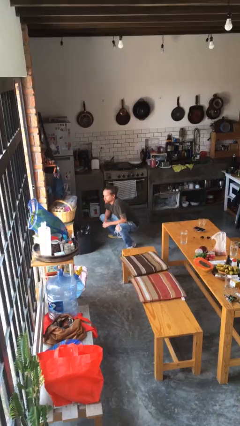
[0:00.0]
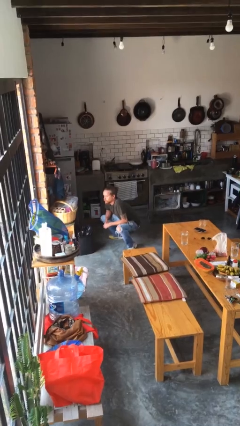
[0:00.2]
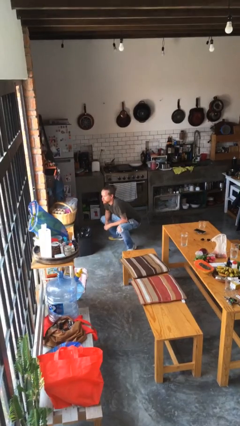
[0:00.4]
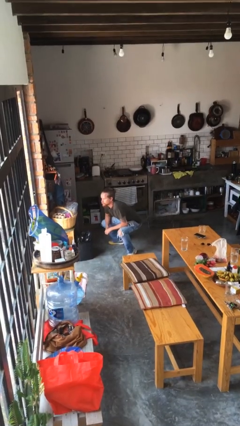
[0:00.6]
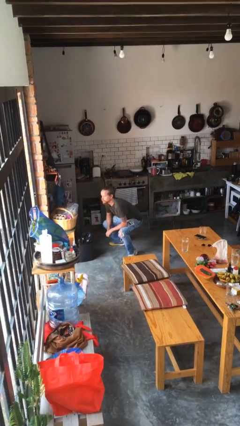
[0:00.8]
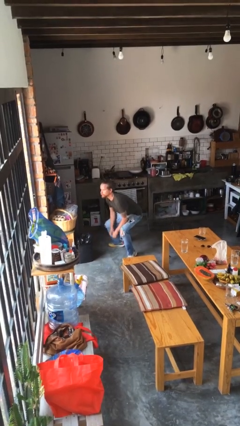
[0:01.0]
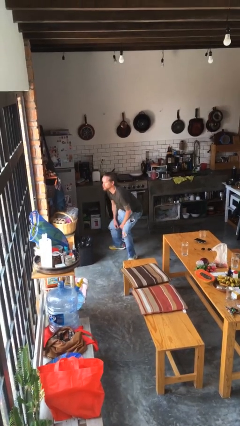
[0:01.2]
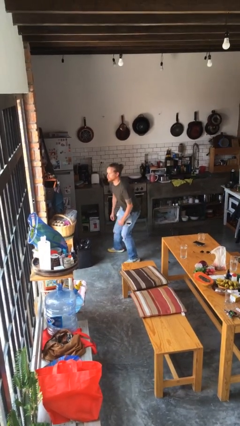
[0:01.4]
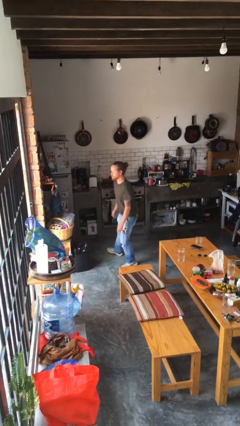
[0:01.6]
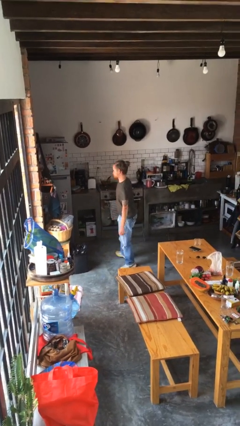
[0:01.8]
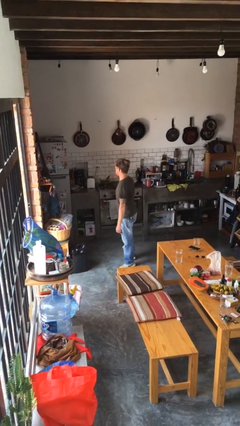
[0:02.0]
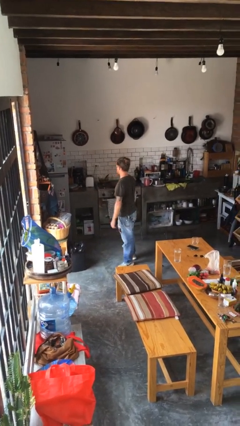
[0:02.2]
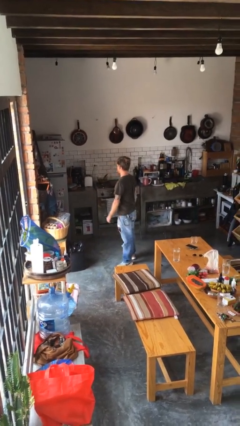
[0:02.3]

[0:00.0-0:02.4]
person stands up

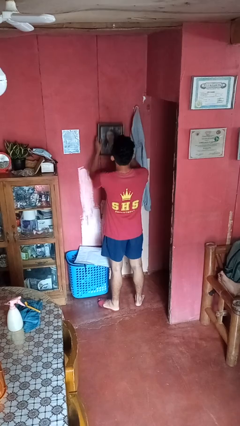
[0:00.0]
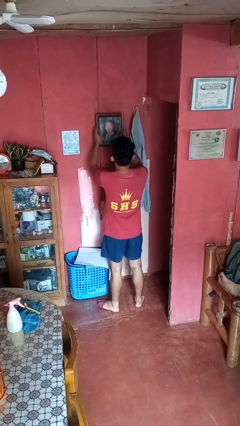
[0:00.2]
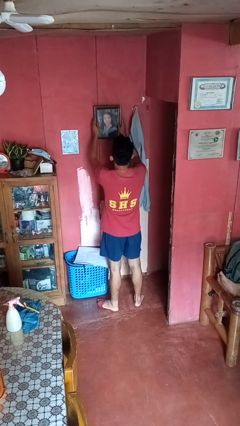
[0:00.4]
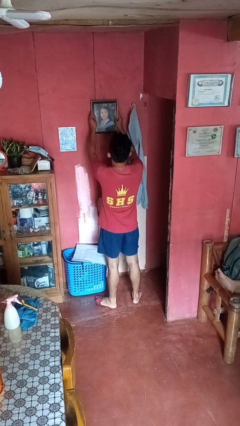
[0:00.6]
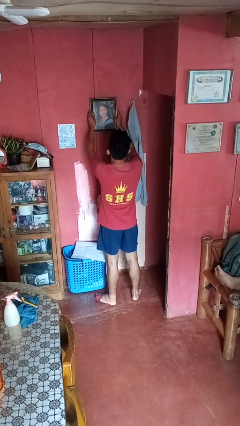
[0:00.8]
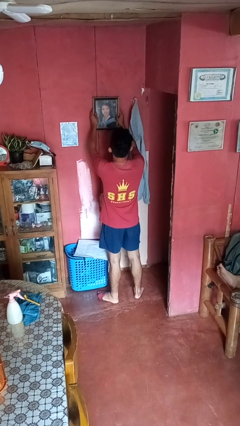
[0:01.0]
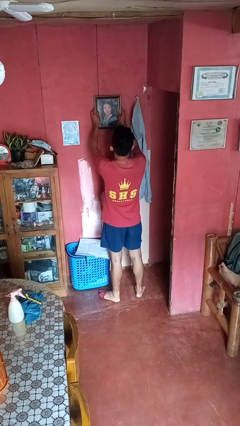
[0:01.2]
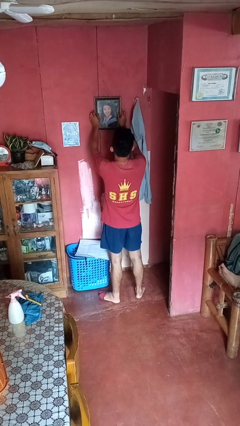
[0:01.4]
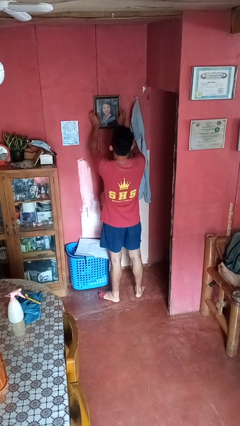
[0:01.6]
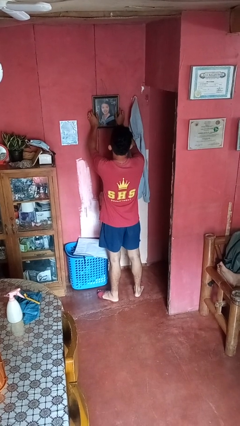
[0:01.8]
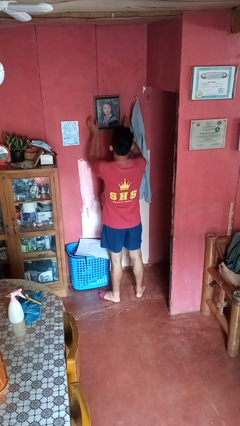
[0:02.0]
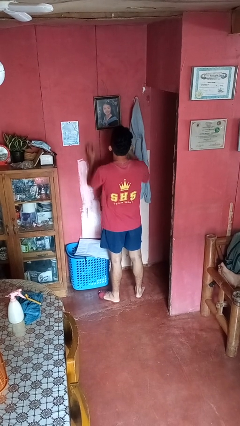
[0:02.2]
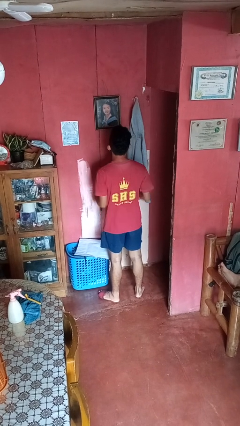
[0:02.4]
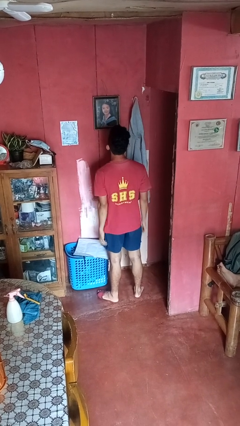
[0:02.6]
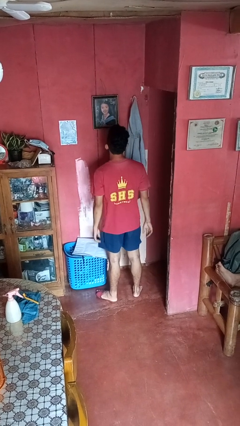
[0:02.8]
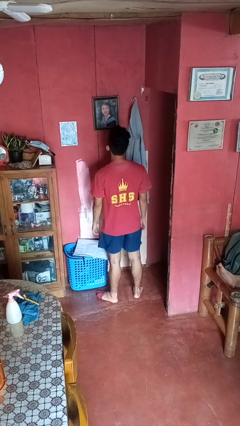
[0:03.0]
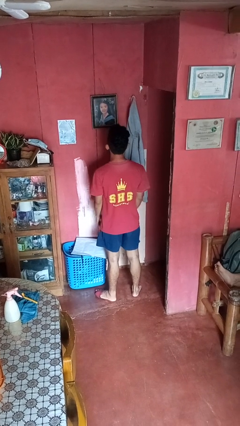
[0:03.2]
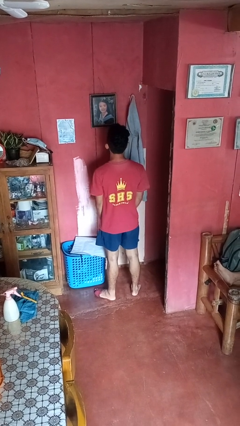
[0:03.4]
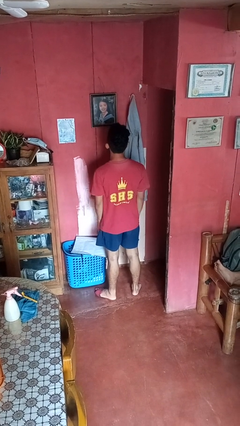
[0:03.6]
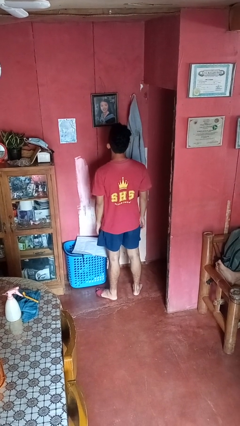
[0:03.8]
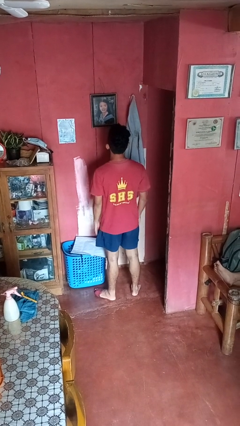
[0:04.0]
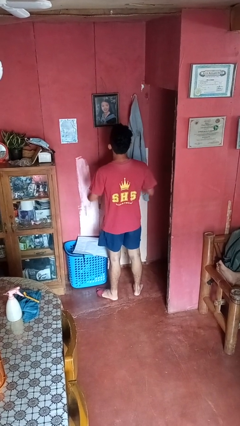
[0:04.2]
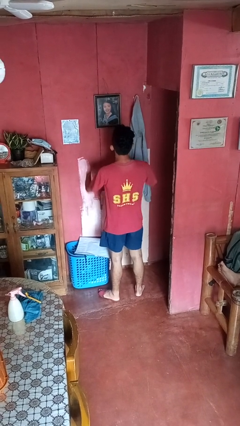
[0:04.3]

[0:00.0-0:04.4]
person puts up picture frame

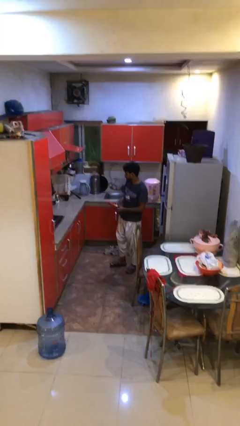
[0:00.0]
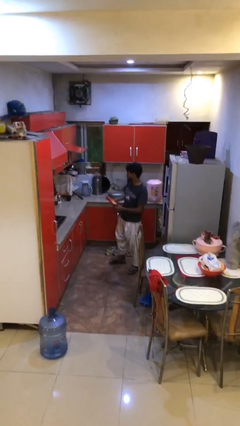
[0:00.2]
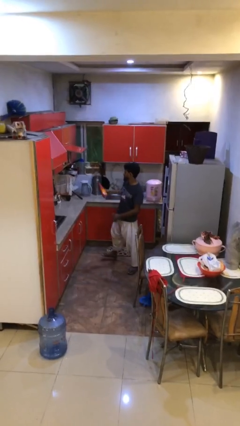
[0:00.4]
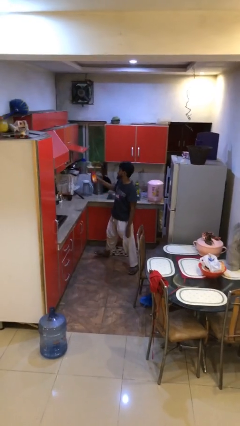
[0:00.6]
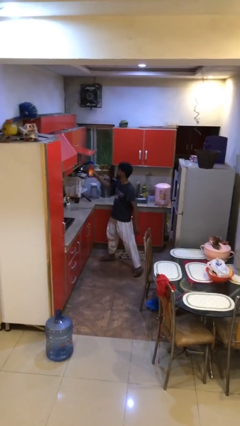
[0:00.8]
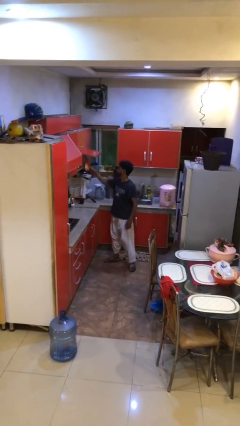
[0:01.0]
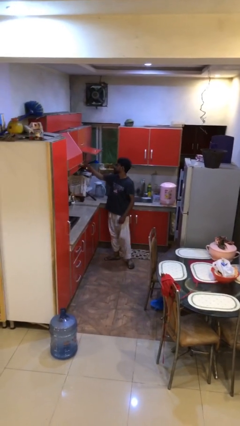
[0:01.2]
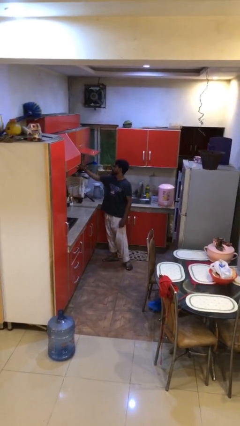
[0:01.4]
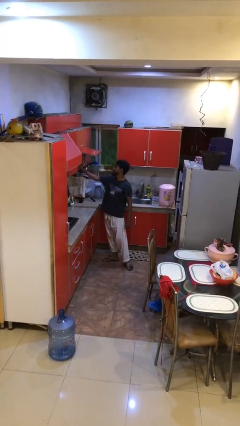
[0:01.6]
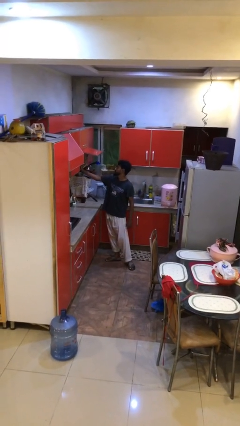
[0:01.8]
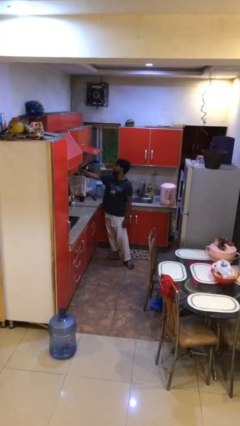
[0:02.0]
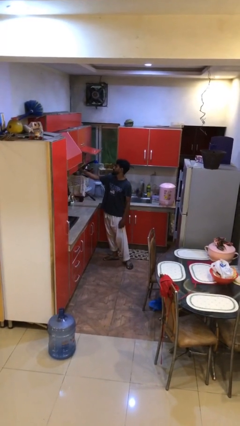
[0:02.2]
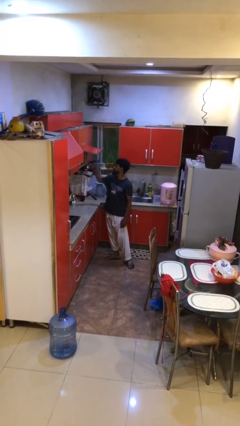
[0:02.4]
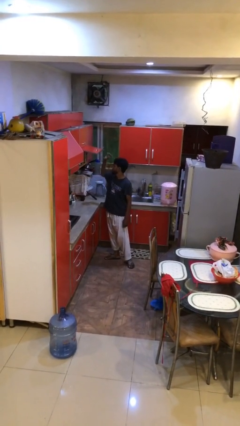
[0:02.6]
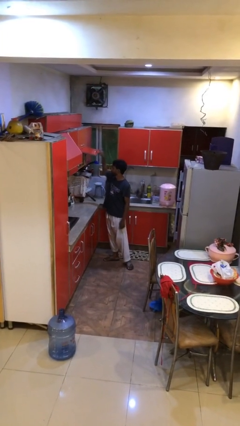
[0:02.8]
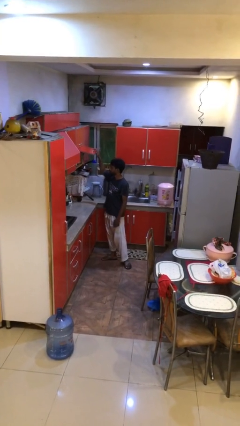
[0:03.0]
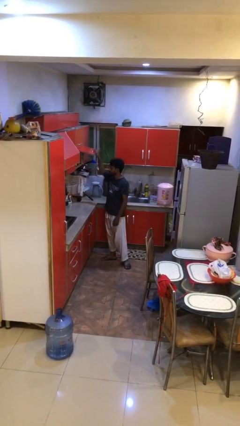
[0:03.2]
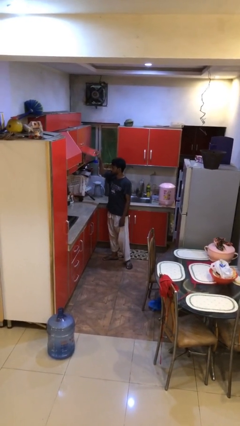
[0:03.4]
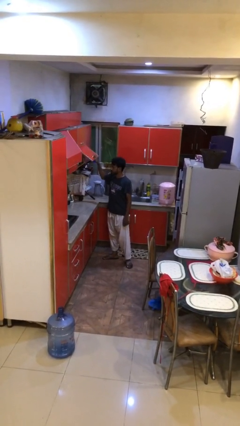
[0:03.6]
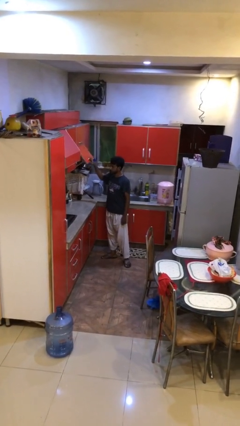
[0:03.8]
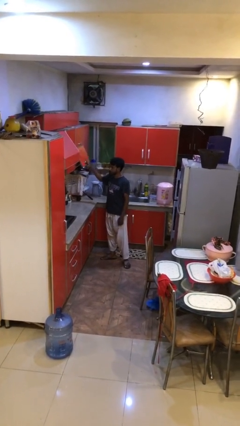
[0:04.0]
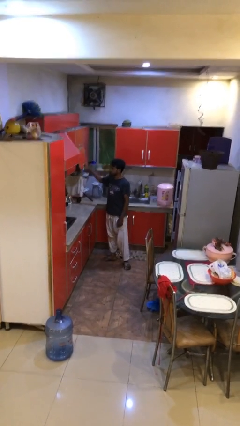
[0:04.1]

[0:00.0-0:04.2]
person puts down object on shelf

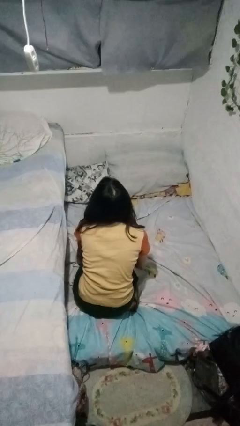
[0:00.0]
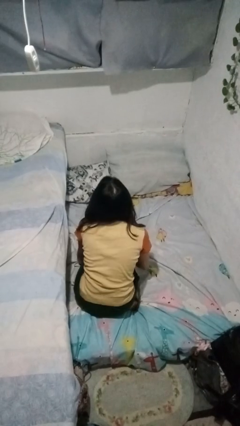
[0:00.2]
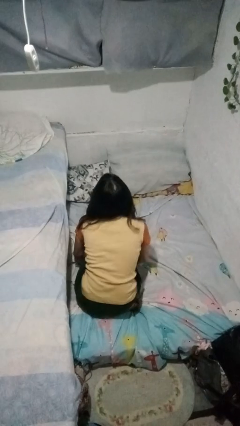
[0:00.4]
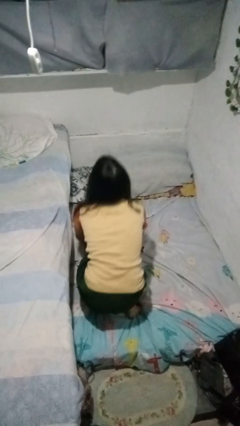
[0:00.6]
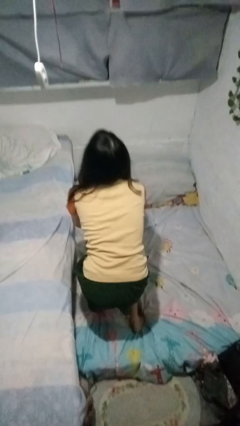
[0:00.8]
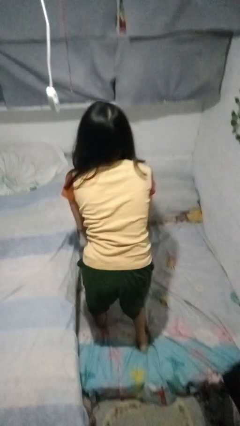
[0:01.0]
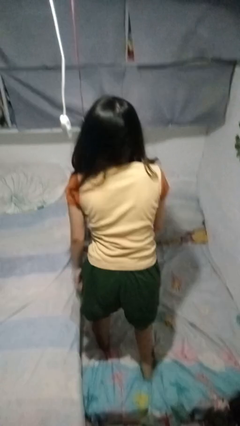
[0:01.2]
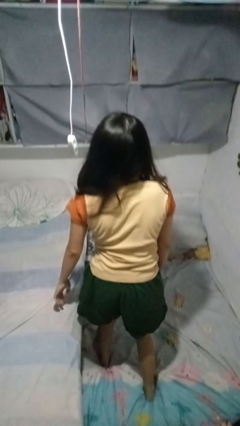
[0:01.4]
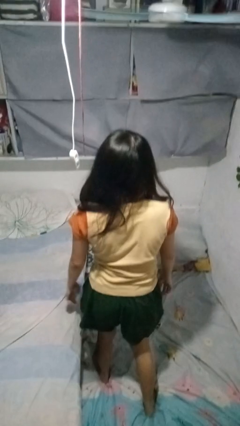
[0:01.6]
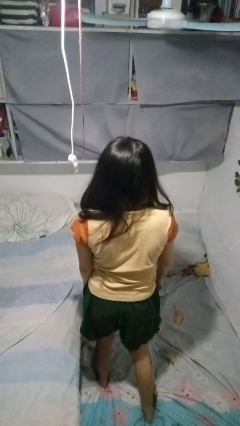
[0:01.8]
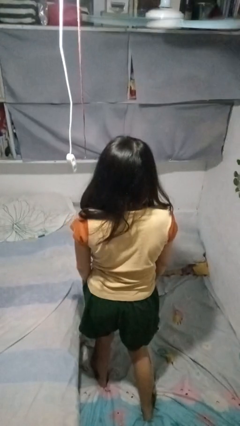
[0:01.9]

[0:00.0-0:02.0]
person stands up from floor

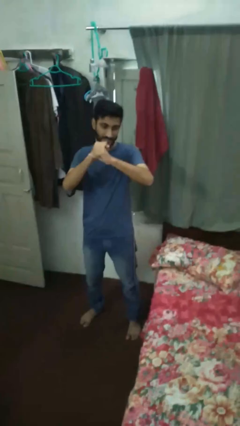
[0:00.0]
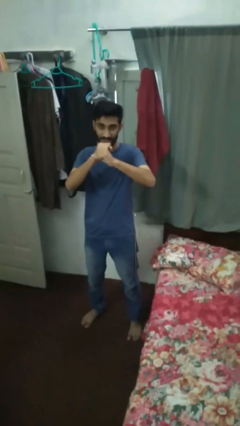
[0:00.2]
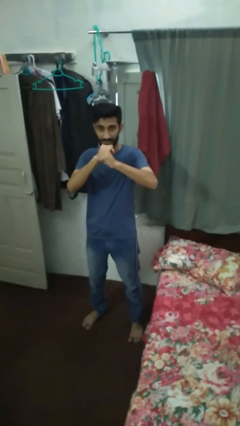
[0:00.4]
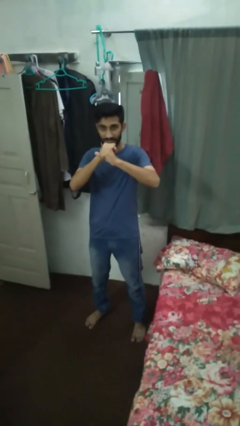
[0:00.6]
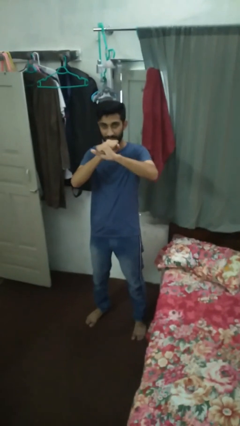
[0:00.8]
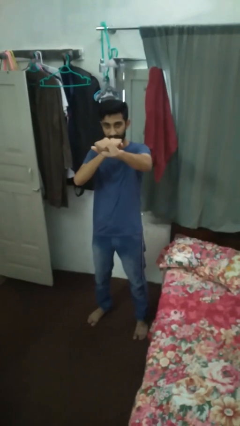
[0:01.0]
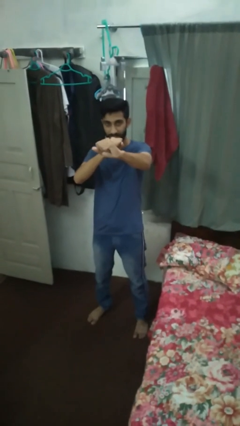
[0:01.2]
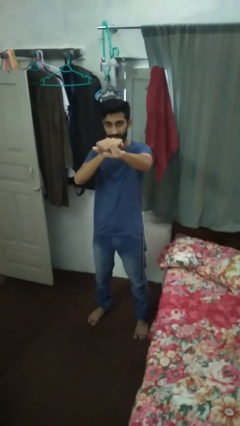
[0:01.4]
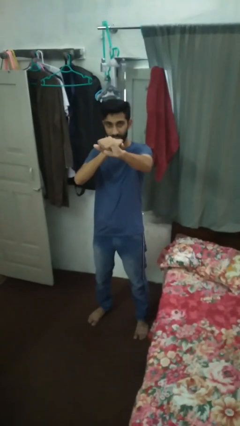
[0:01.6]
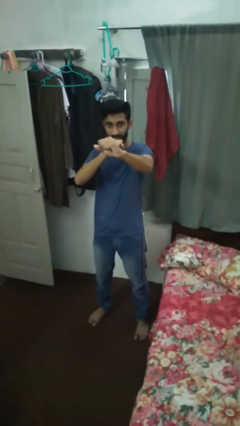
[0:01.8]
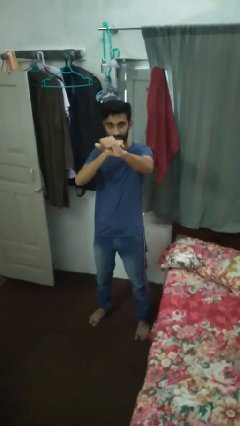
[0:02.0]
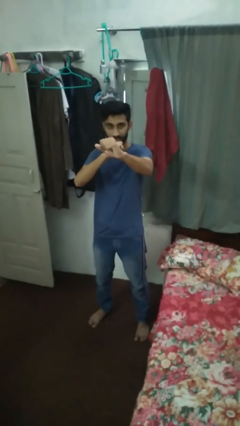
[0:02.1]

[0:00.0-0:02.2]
person gestures zoom in

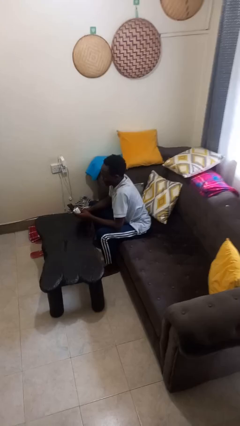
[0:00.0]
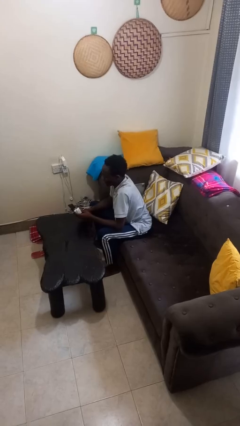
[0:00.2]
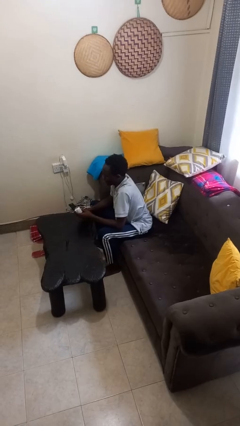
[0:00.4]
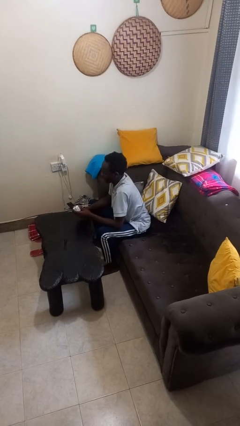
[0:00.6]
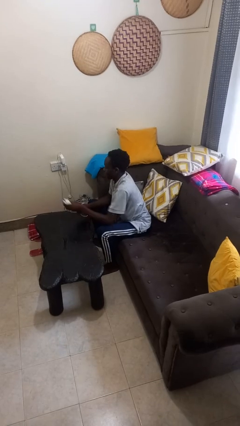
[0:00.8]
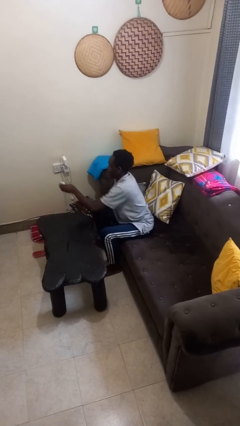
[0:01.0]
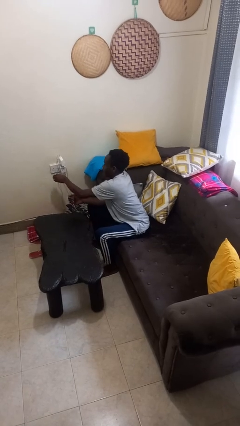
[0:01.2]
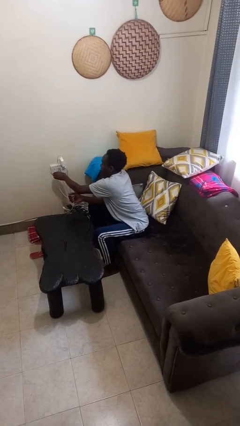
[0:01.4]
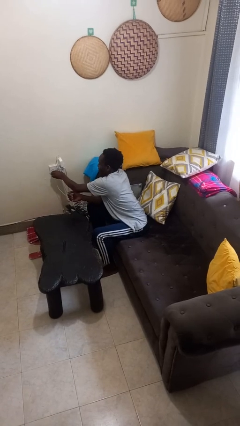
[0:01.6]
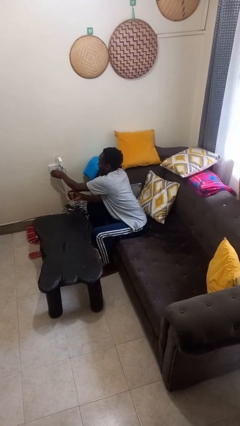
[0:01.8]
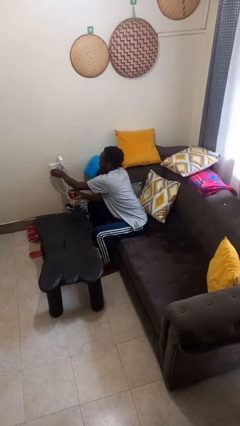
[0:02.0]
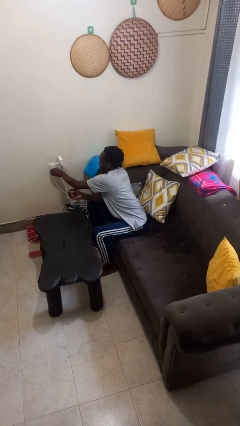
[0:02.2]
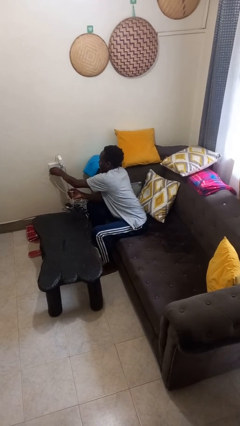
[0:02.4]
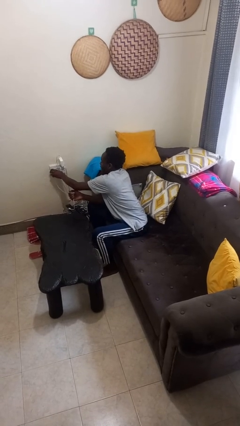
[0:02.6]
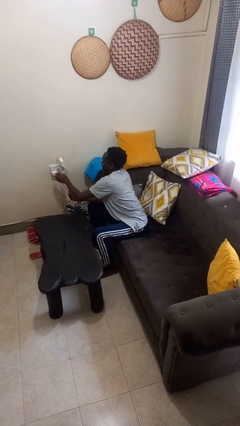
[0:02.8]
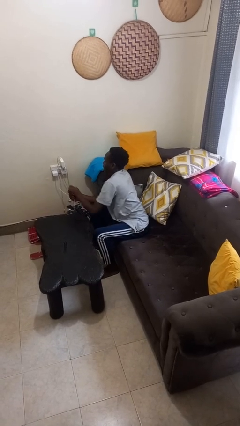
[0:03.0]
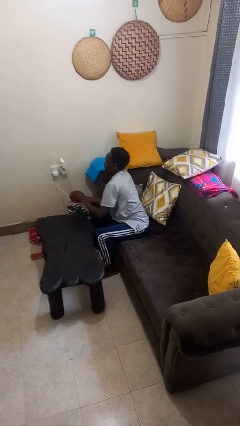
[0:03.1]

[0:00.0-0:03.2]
person plugs into electrical socket
